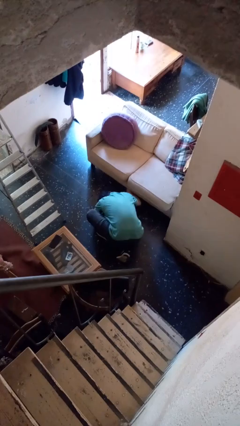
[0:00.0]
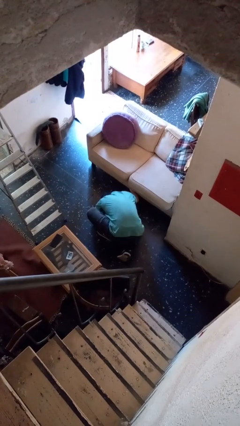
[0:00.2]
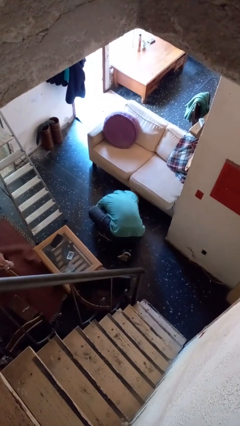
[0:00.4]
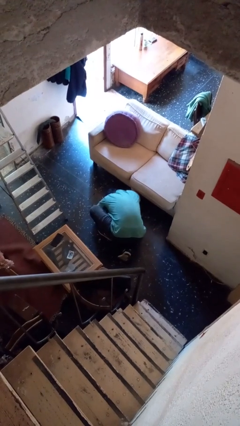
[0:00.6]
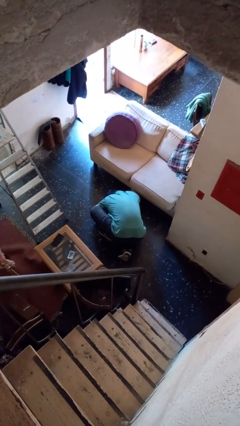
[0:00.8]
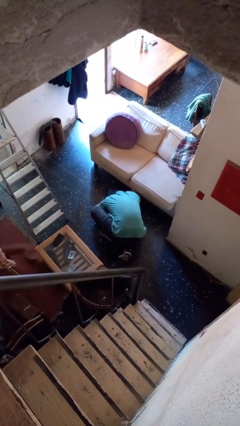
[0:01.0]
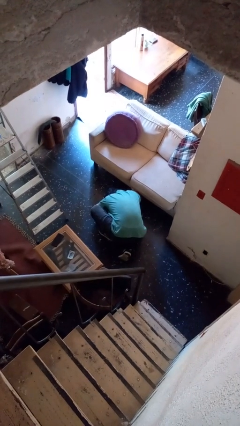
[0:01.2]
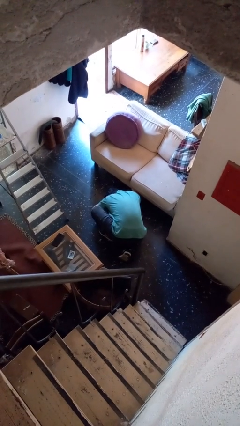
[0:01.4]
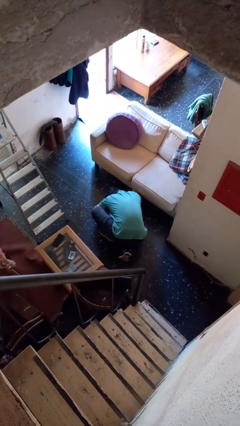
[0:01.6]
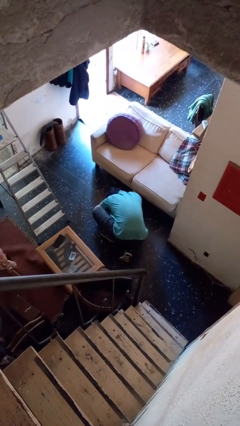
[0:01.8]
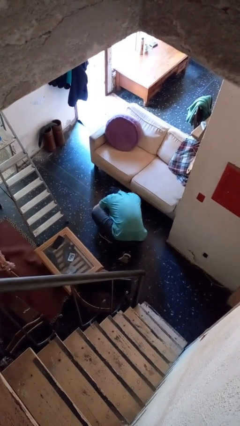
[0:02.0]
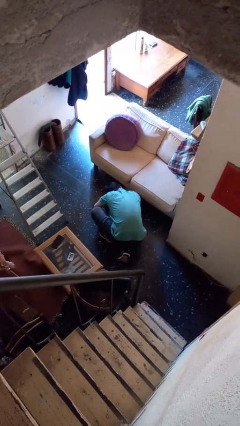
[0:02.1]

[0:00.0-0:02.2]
person searches under couch

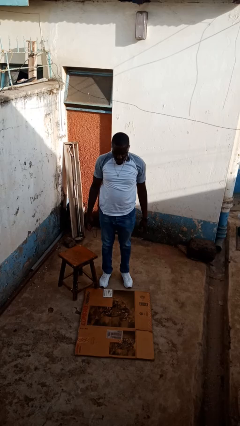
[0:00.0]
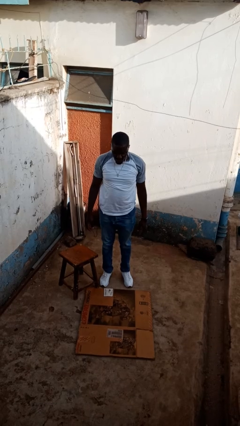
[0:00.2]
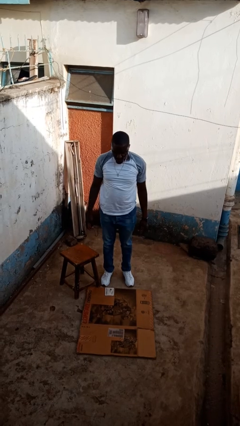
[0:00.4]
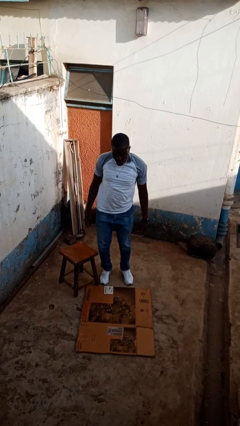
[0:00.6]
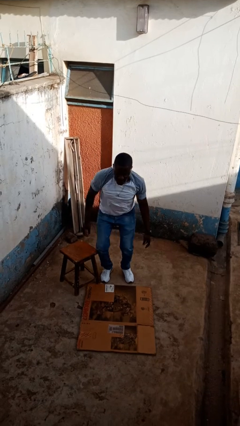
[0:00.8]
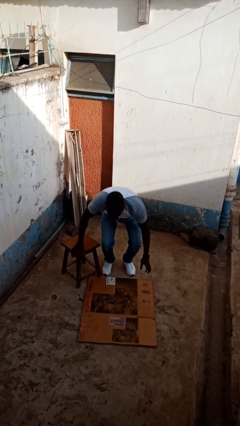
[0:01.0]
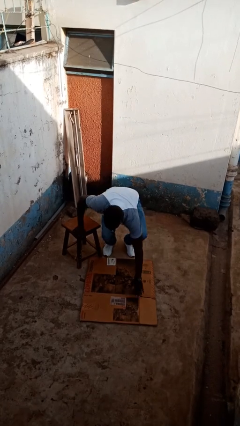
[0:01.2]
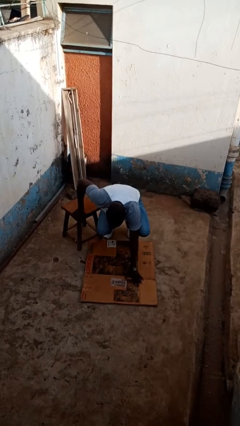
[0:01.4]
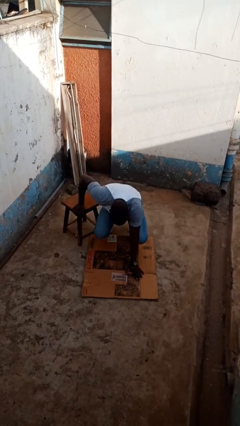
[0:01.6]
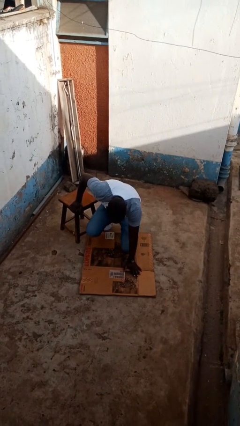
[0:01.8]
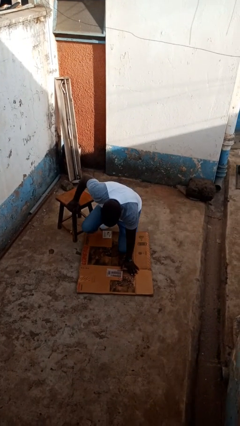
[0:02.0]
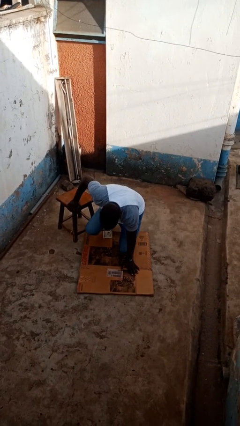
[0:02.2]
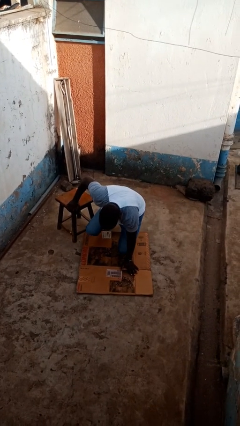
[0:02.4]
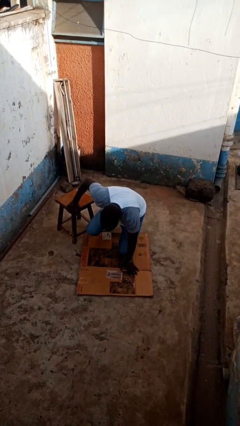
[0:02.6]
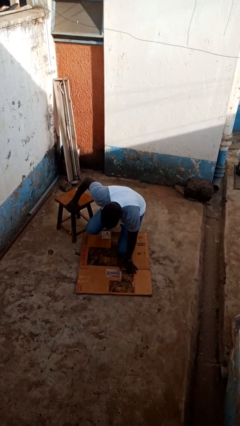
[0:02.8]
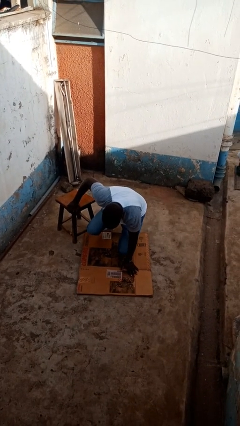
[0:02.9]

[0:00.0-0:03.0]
person trips on object on floor

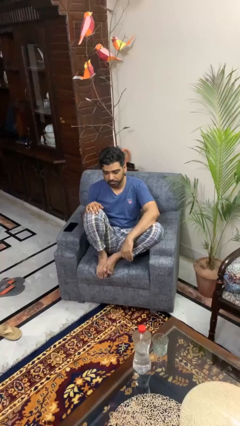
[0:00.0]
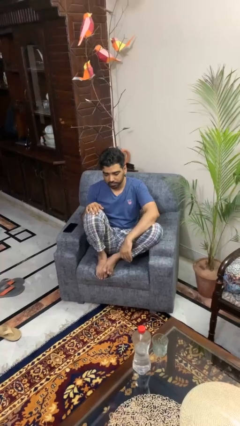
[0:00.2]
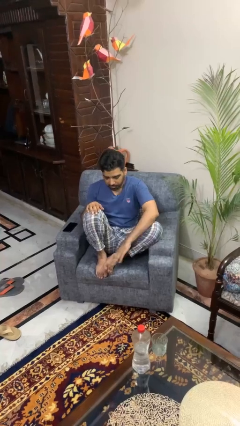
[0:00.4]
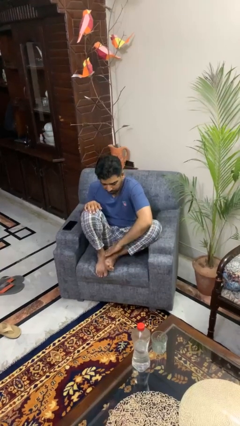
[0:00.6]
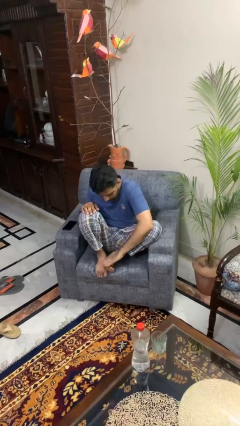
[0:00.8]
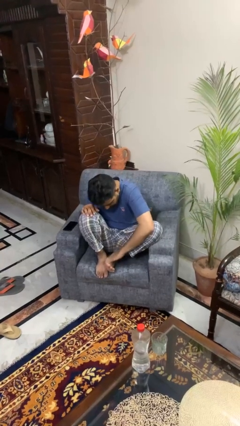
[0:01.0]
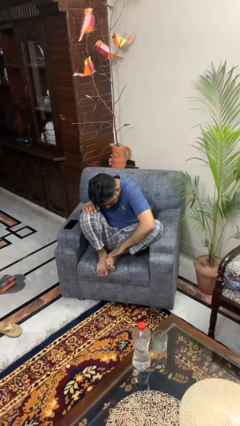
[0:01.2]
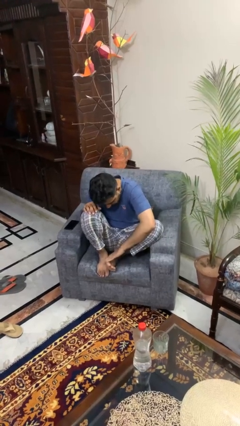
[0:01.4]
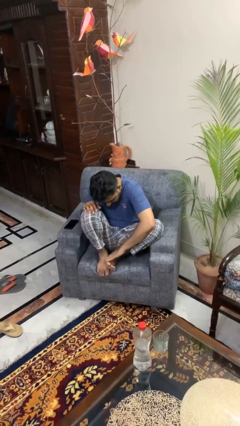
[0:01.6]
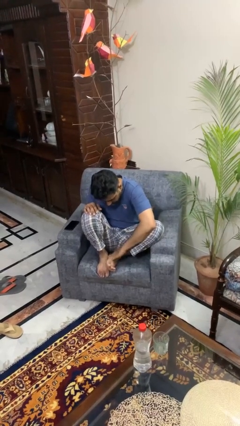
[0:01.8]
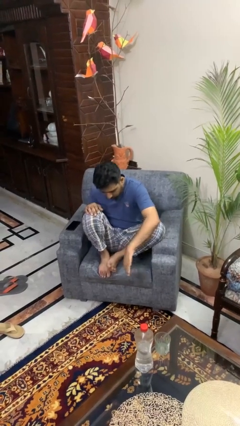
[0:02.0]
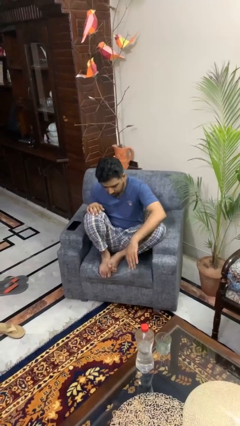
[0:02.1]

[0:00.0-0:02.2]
person rubs foot

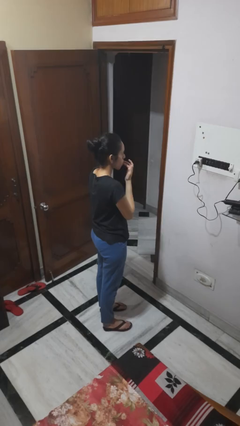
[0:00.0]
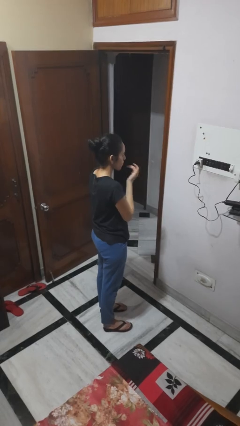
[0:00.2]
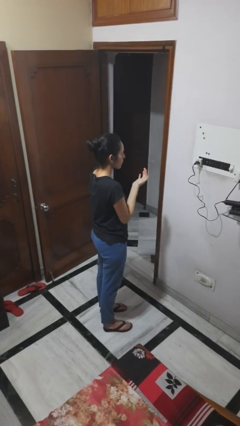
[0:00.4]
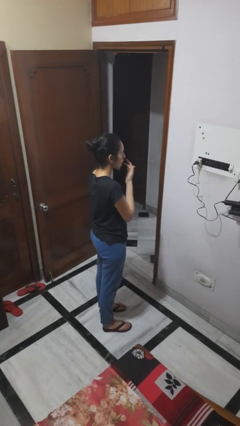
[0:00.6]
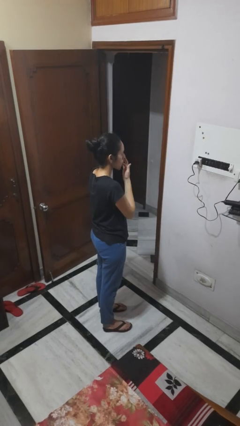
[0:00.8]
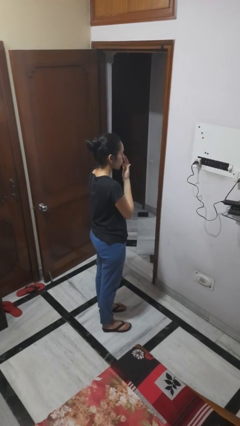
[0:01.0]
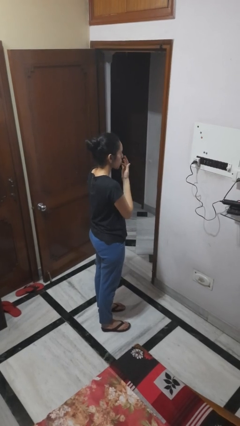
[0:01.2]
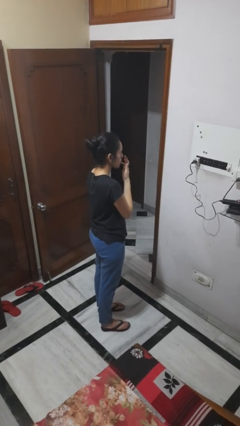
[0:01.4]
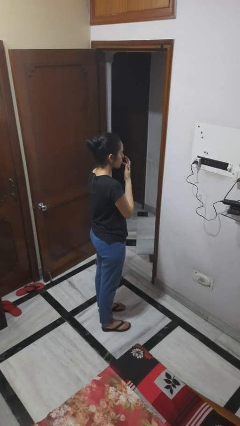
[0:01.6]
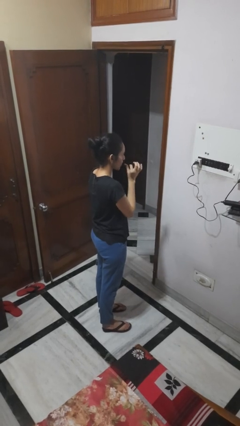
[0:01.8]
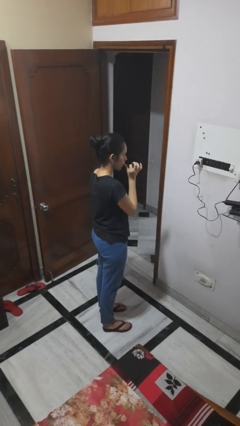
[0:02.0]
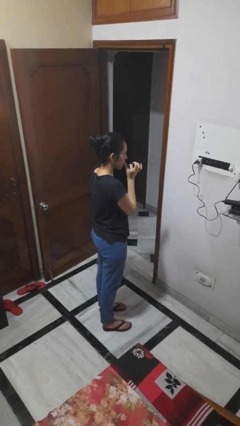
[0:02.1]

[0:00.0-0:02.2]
person licks fingers

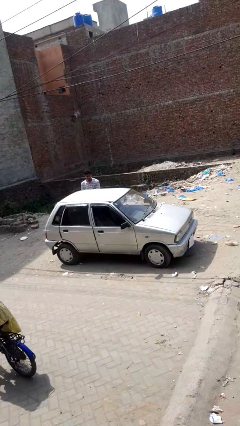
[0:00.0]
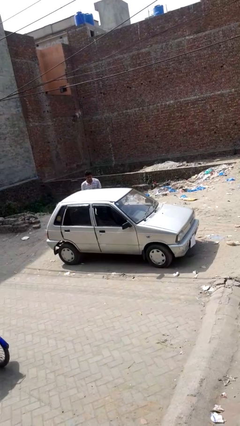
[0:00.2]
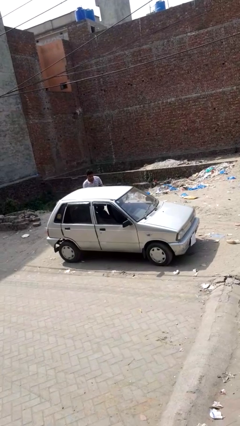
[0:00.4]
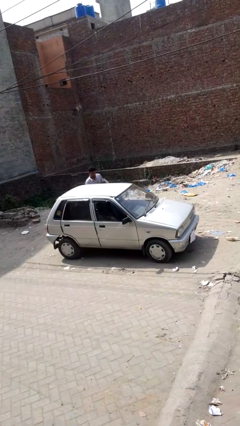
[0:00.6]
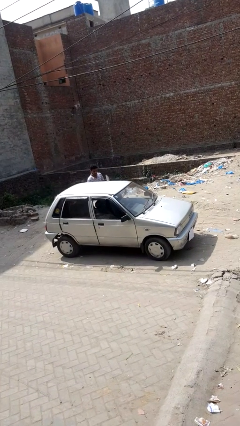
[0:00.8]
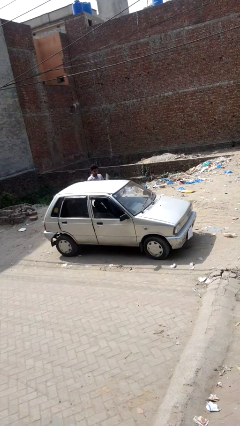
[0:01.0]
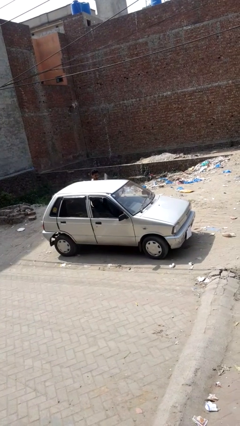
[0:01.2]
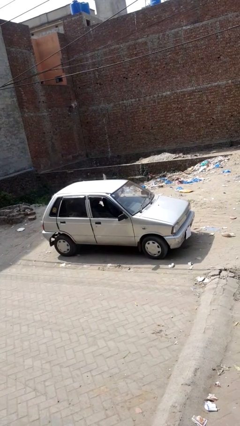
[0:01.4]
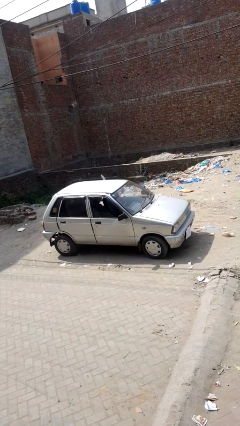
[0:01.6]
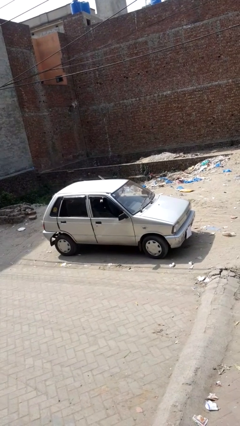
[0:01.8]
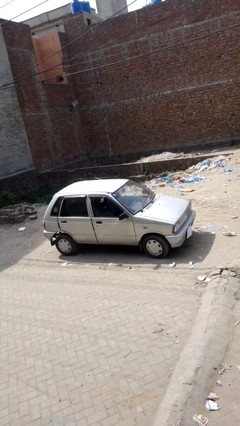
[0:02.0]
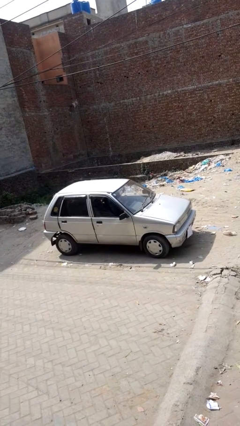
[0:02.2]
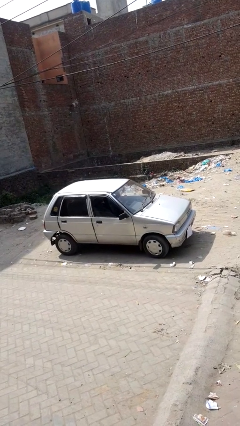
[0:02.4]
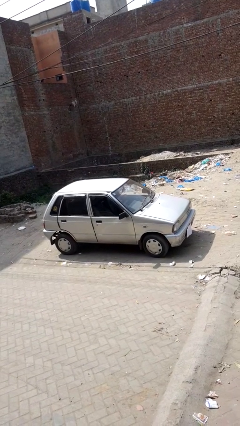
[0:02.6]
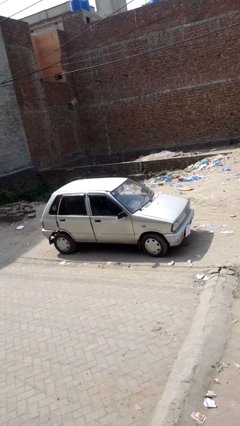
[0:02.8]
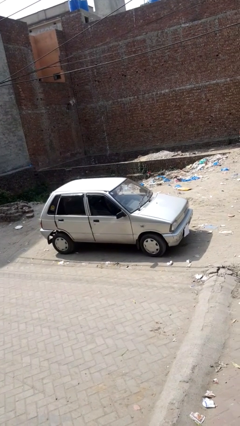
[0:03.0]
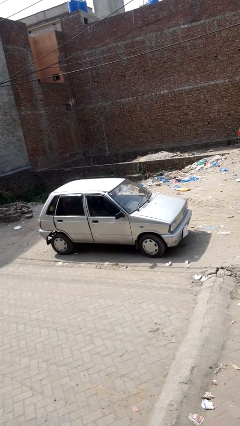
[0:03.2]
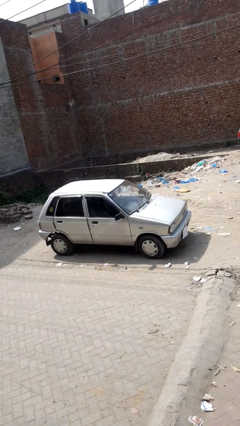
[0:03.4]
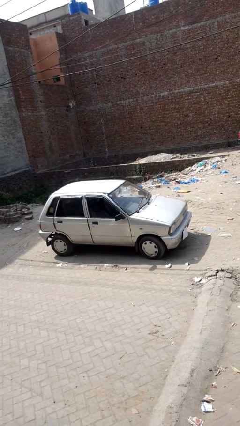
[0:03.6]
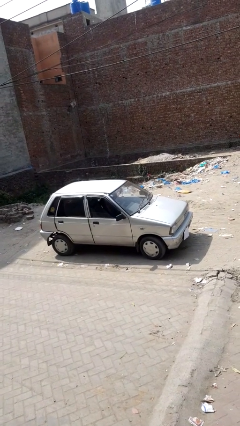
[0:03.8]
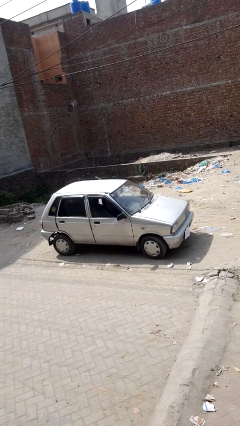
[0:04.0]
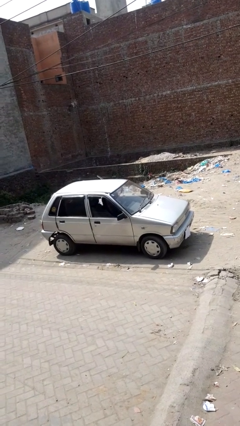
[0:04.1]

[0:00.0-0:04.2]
car picks up person

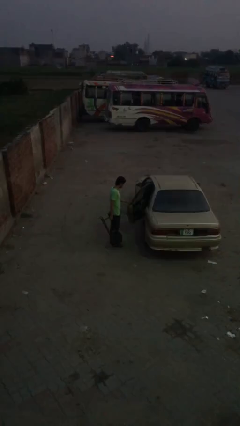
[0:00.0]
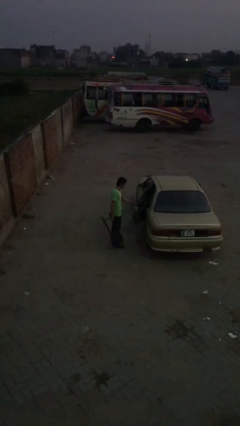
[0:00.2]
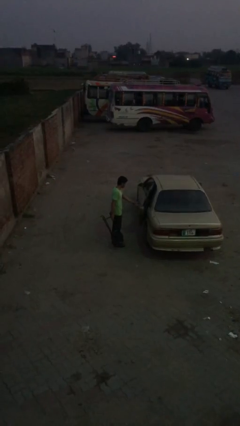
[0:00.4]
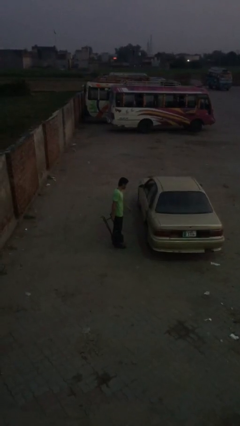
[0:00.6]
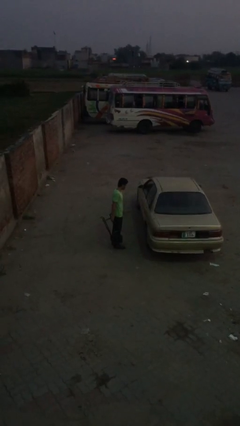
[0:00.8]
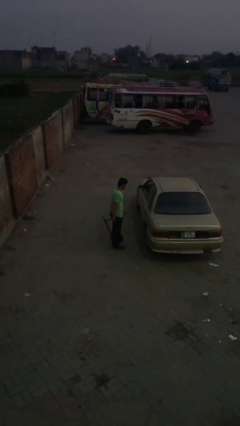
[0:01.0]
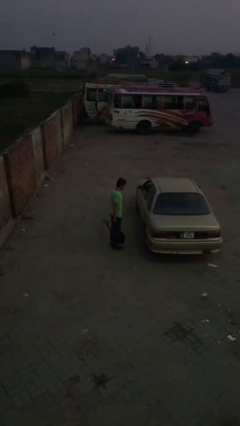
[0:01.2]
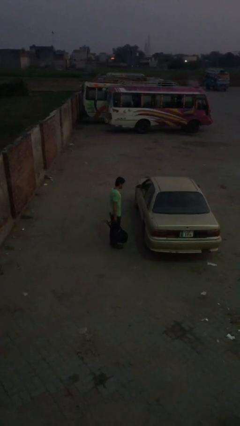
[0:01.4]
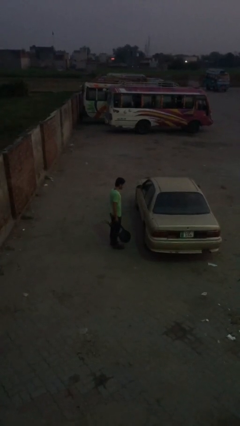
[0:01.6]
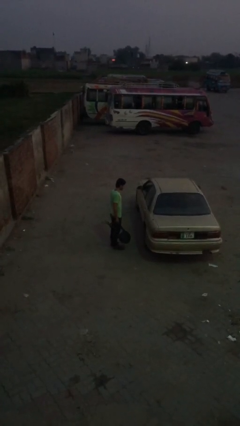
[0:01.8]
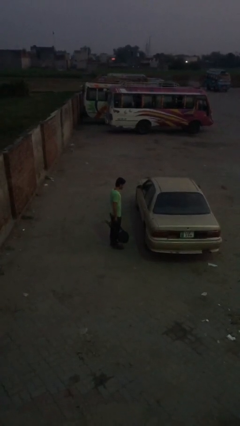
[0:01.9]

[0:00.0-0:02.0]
person closes car door

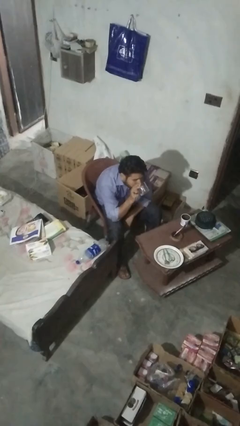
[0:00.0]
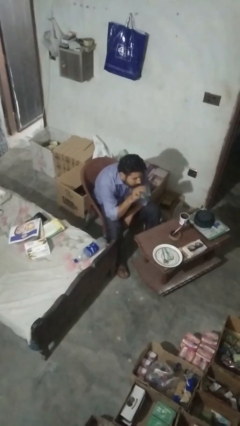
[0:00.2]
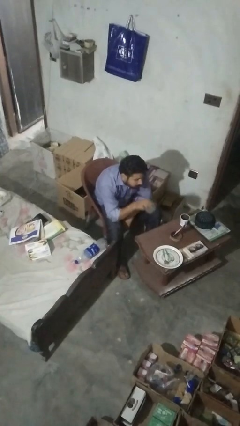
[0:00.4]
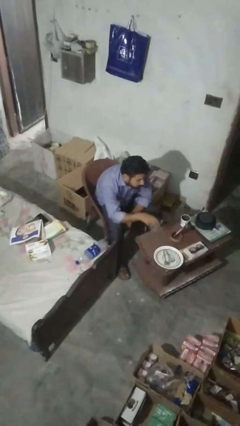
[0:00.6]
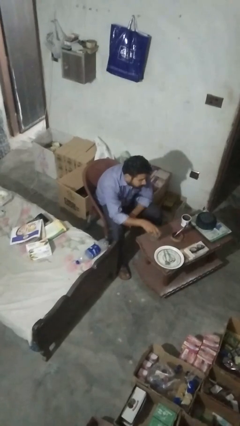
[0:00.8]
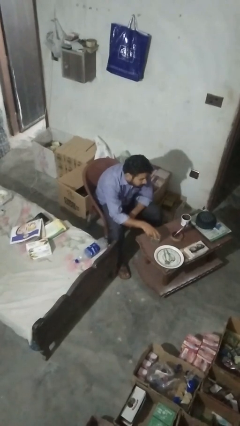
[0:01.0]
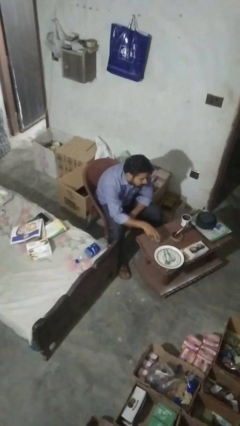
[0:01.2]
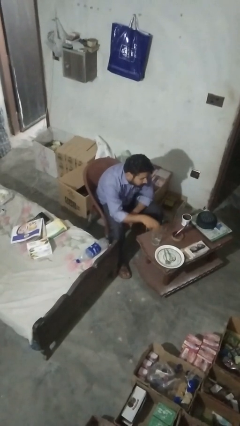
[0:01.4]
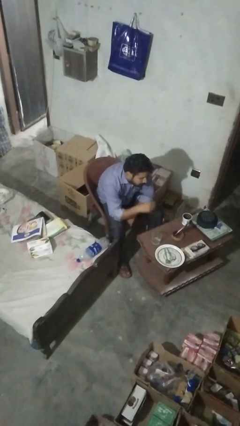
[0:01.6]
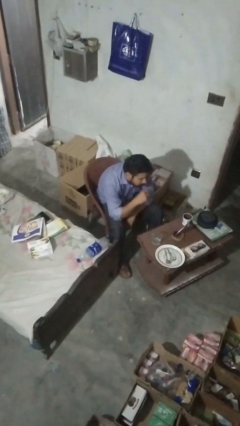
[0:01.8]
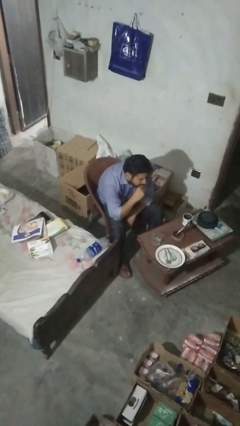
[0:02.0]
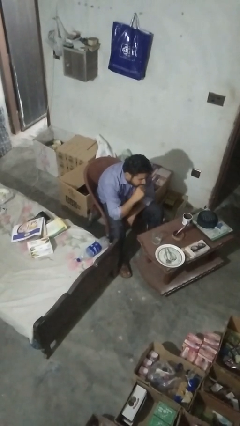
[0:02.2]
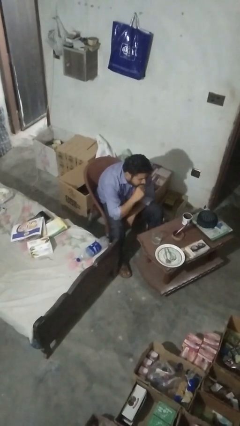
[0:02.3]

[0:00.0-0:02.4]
person puts down object on table
